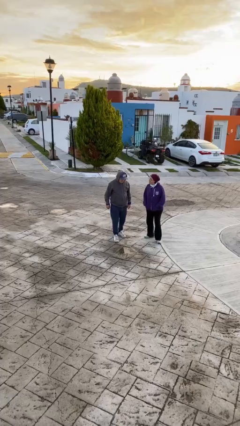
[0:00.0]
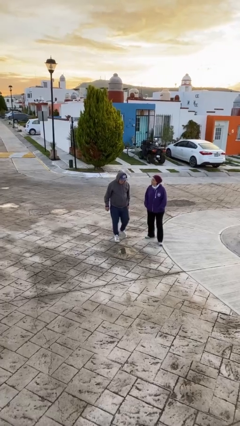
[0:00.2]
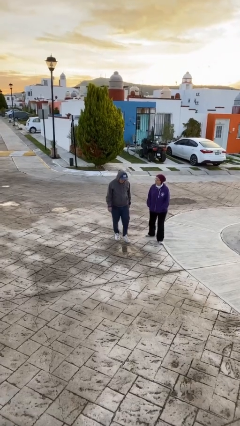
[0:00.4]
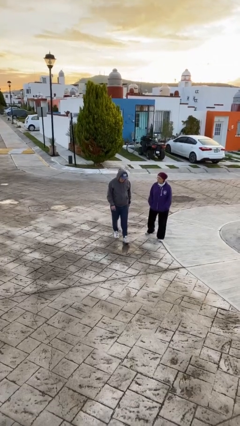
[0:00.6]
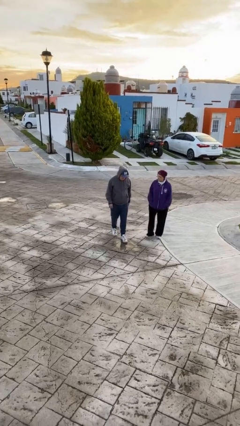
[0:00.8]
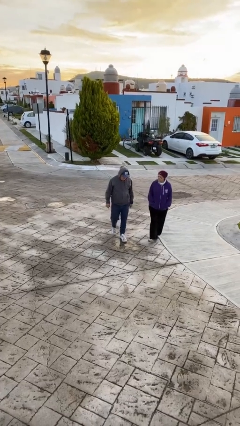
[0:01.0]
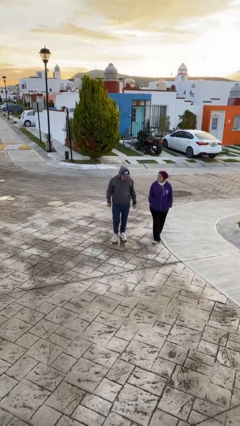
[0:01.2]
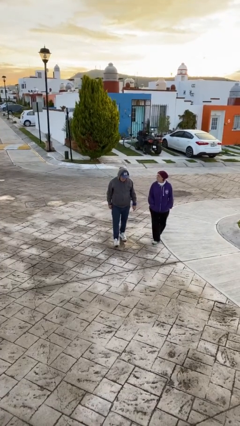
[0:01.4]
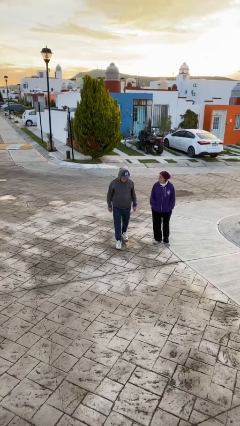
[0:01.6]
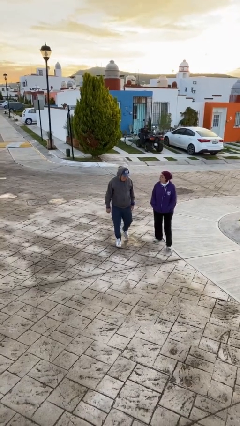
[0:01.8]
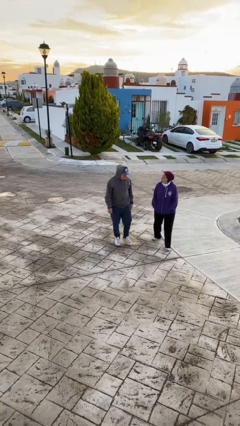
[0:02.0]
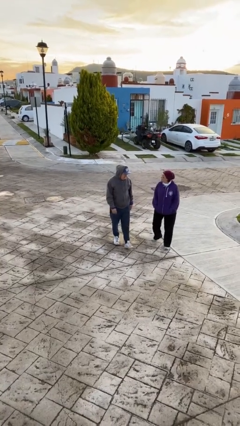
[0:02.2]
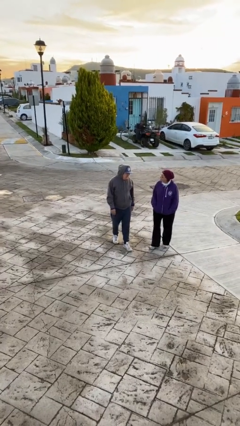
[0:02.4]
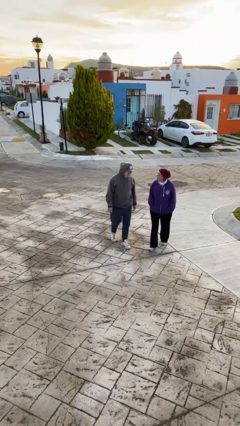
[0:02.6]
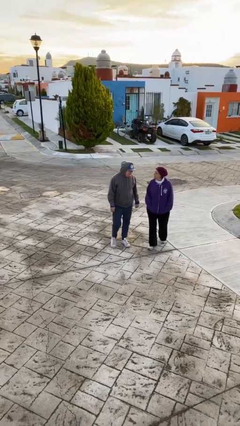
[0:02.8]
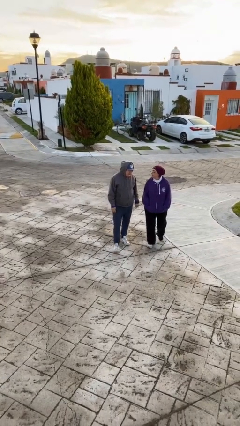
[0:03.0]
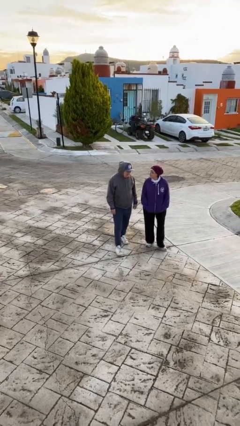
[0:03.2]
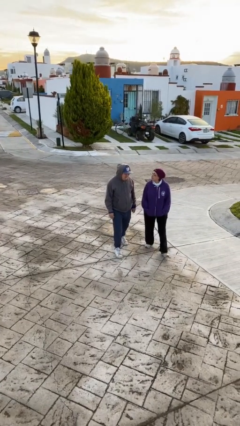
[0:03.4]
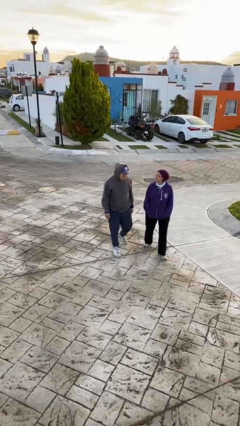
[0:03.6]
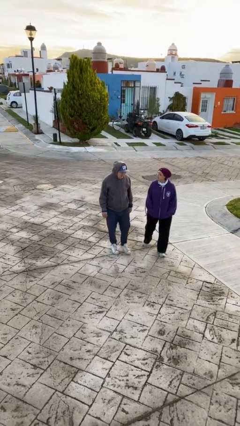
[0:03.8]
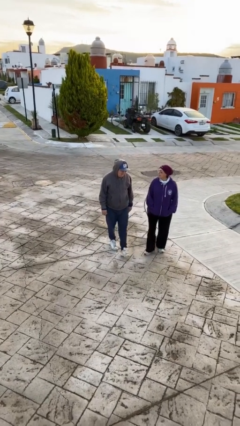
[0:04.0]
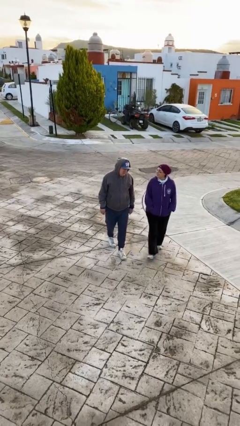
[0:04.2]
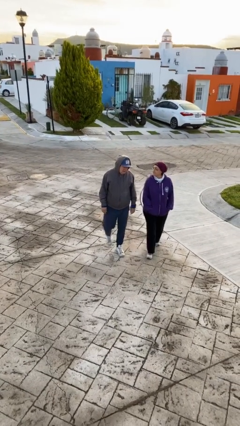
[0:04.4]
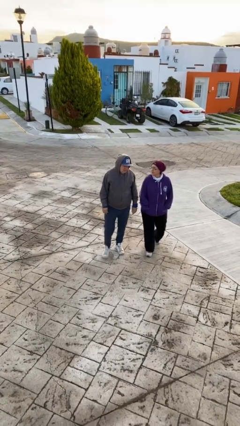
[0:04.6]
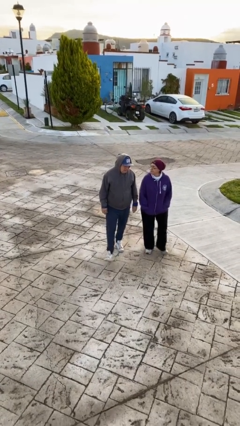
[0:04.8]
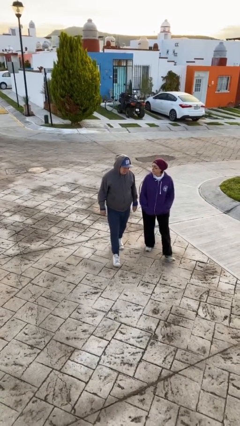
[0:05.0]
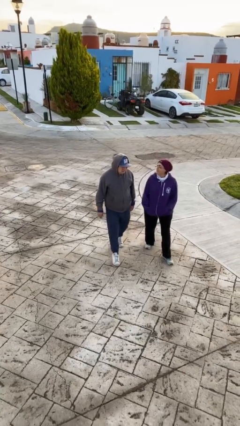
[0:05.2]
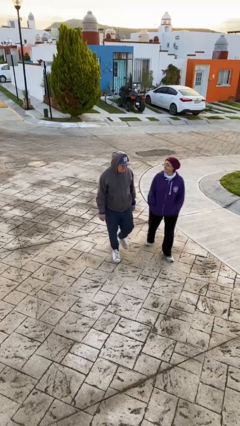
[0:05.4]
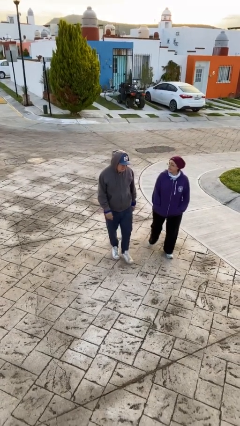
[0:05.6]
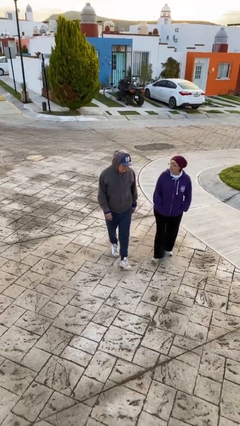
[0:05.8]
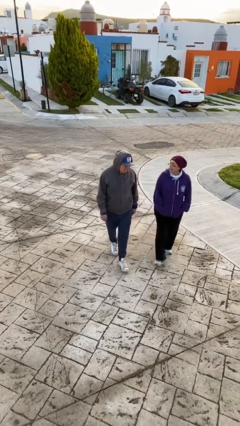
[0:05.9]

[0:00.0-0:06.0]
person talks to person

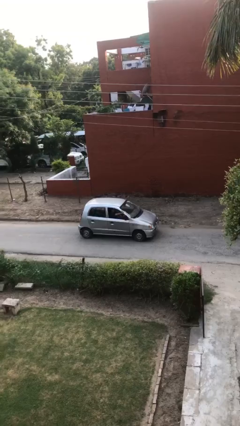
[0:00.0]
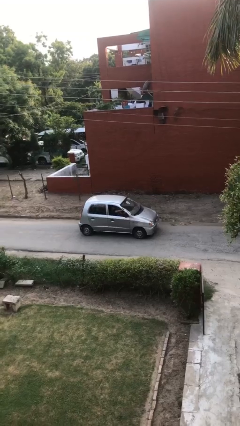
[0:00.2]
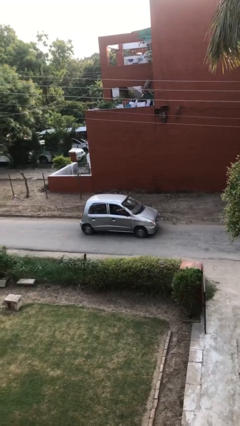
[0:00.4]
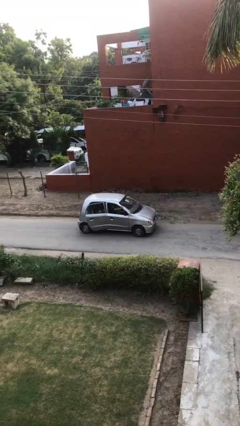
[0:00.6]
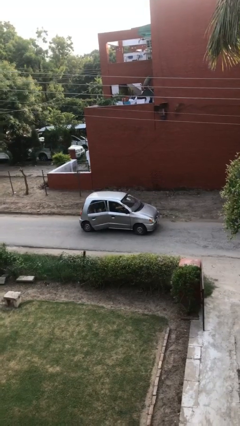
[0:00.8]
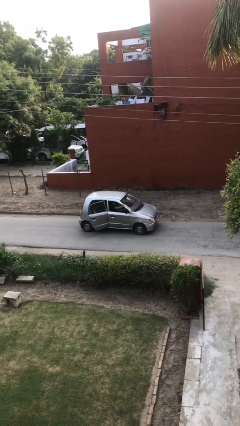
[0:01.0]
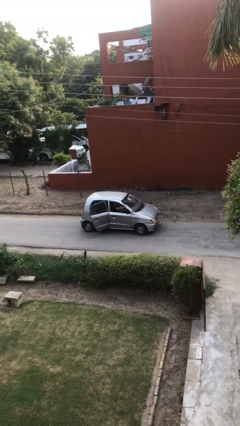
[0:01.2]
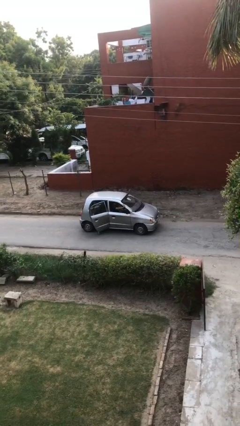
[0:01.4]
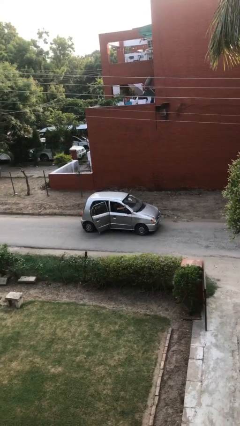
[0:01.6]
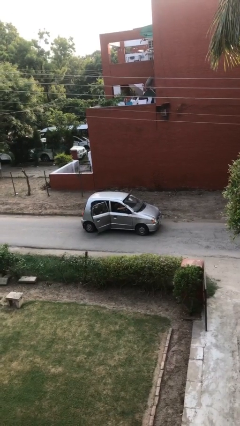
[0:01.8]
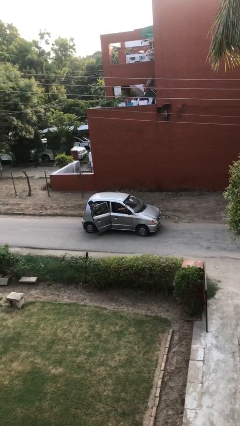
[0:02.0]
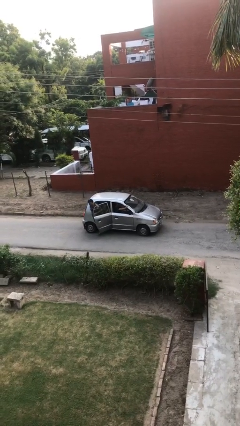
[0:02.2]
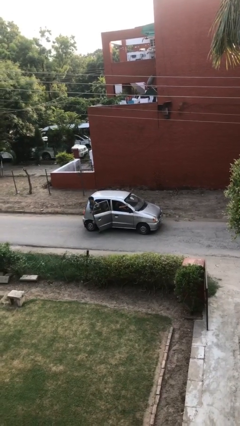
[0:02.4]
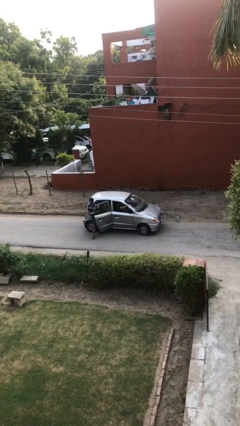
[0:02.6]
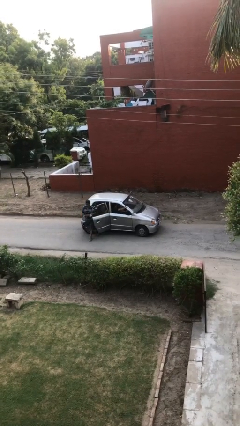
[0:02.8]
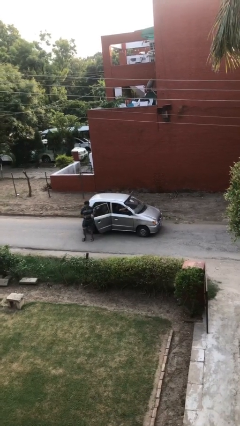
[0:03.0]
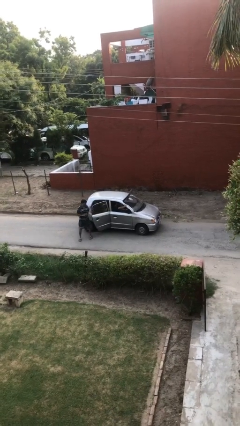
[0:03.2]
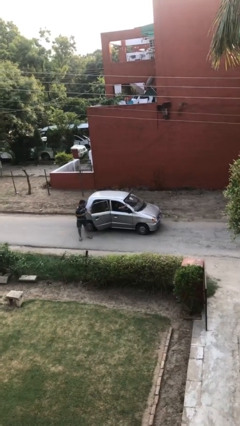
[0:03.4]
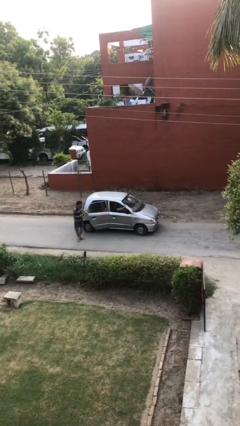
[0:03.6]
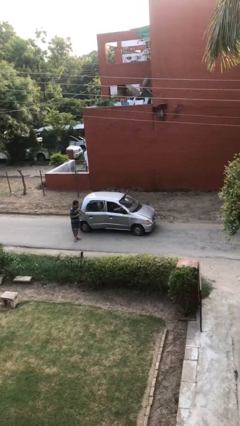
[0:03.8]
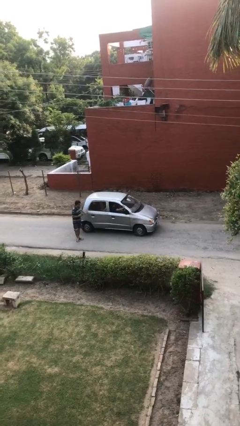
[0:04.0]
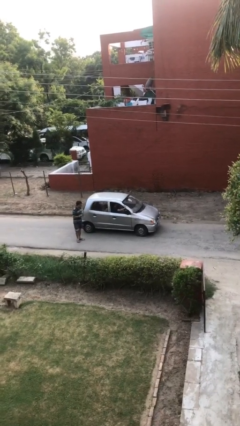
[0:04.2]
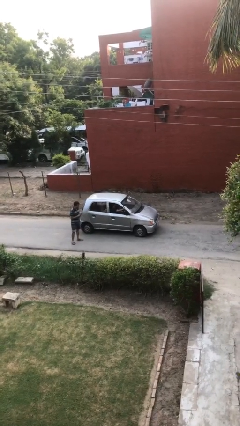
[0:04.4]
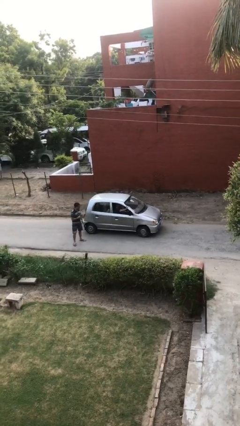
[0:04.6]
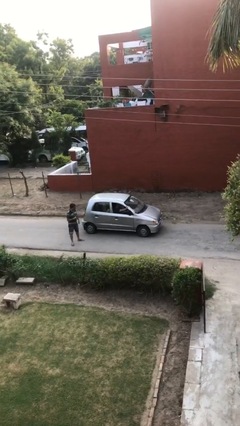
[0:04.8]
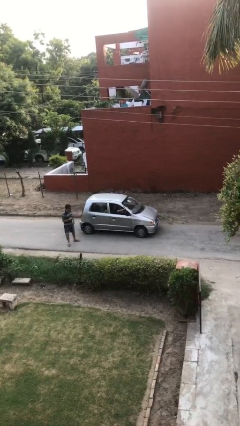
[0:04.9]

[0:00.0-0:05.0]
car drops off person

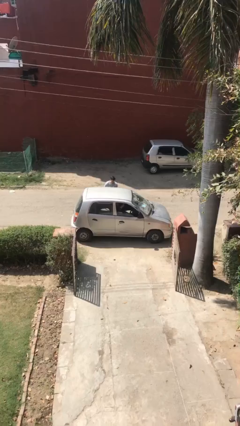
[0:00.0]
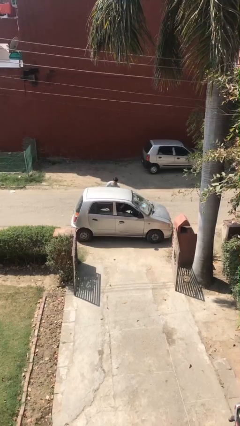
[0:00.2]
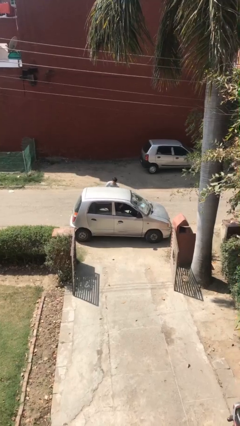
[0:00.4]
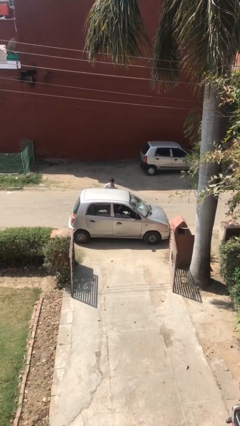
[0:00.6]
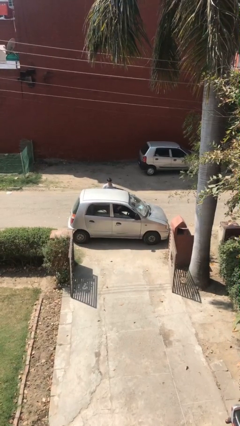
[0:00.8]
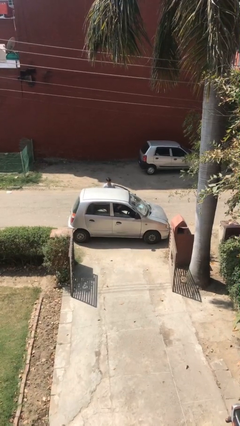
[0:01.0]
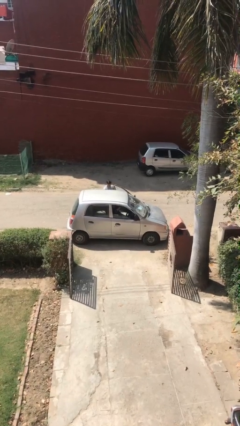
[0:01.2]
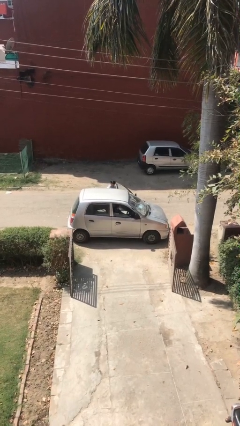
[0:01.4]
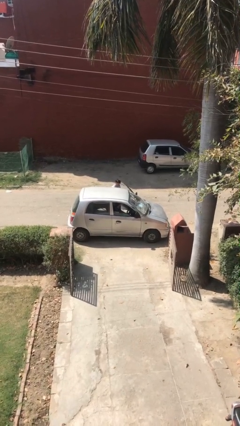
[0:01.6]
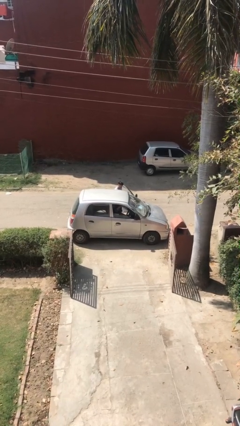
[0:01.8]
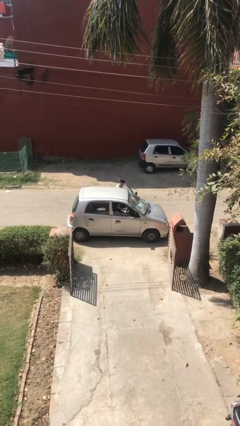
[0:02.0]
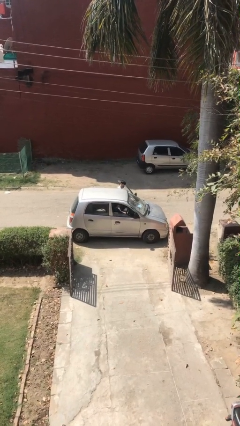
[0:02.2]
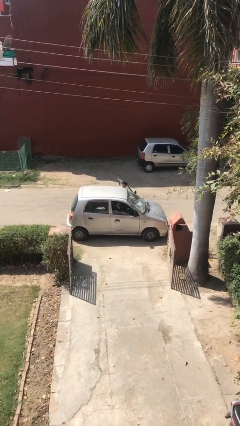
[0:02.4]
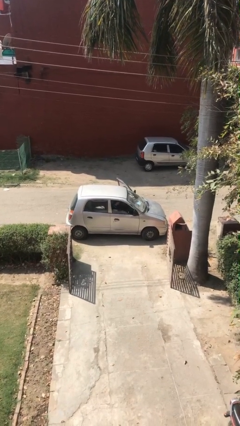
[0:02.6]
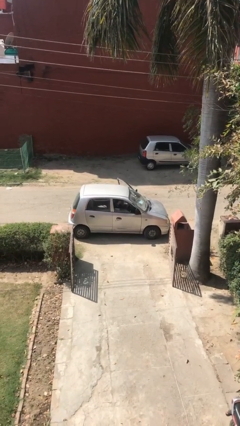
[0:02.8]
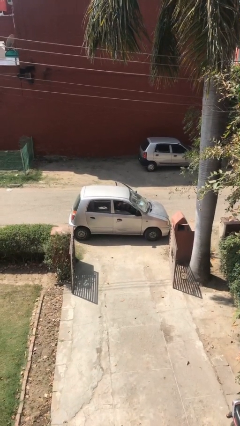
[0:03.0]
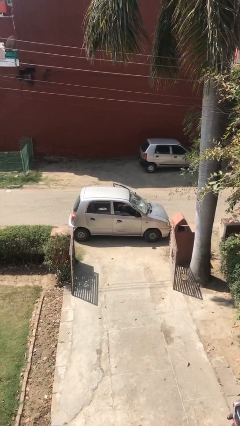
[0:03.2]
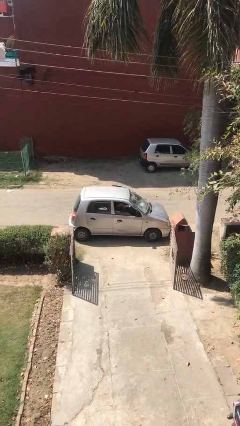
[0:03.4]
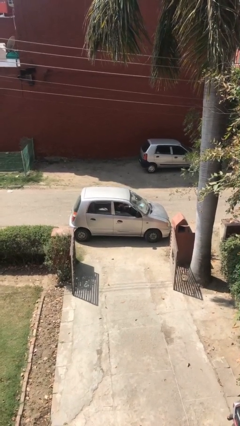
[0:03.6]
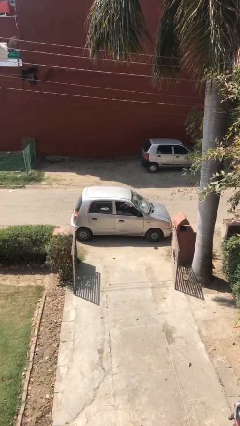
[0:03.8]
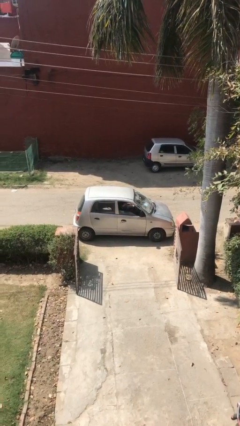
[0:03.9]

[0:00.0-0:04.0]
car picks up person

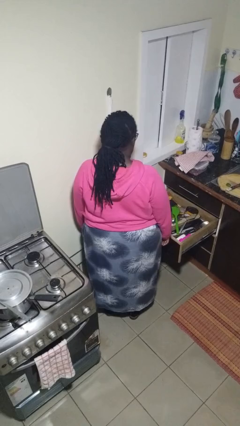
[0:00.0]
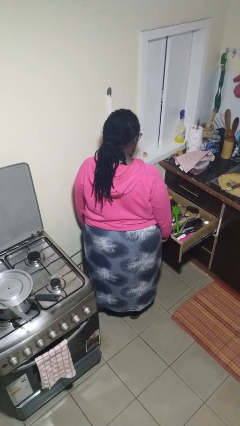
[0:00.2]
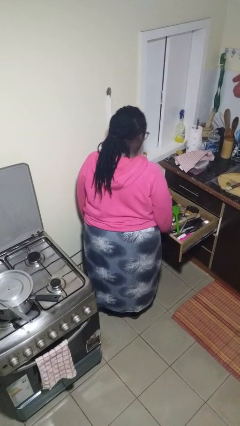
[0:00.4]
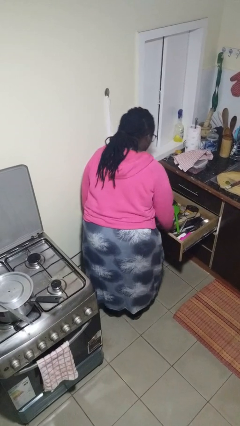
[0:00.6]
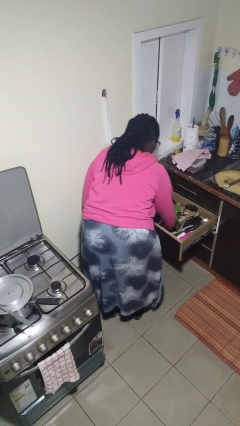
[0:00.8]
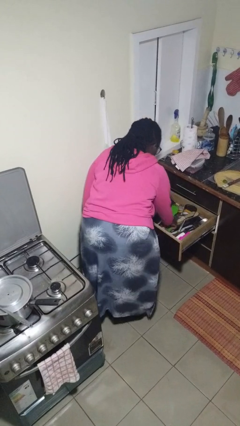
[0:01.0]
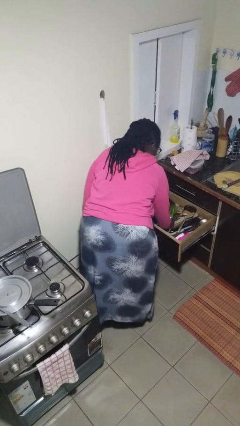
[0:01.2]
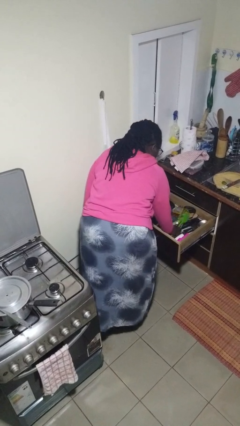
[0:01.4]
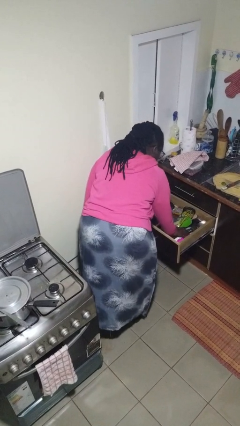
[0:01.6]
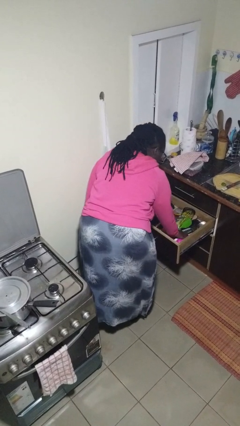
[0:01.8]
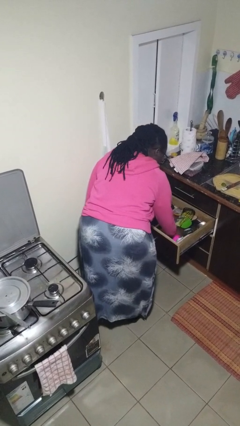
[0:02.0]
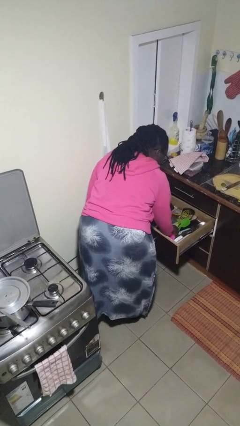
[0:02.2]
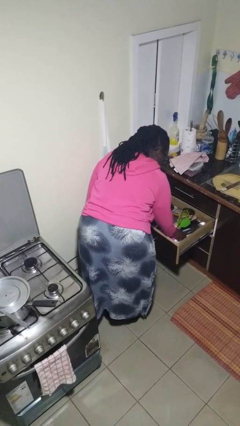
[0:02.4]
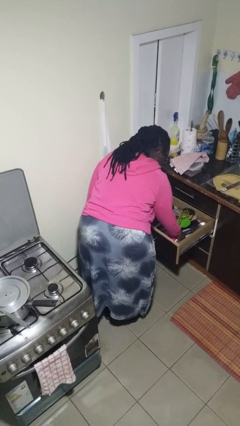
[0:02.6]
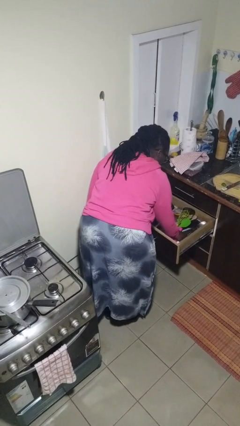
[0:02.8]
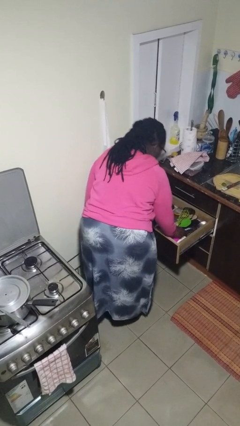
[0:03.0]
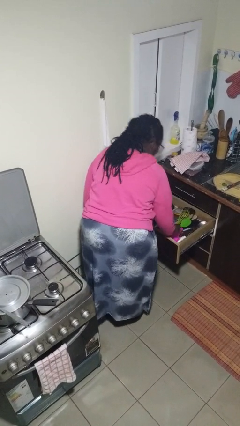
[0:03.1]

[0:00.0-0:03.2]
person searches in kitchen drawer
